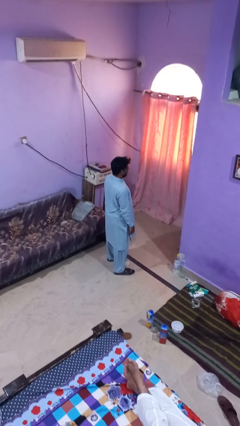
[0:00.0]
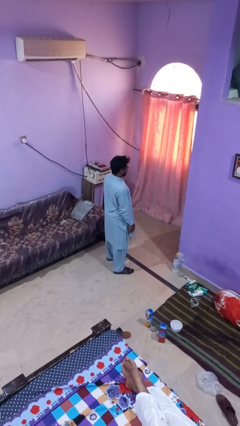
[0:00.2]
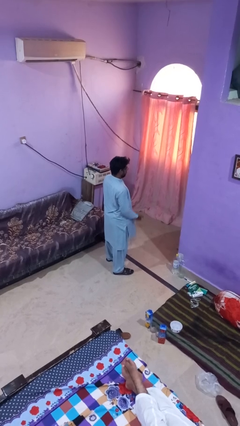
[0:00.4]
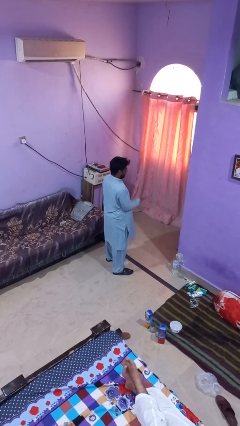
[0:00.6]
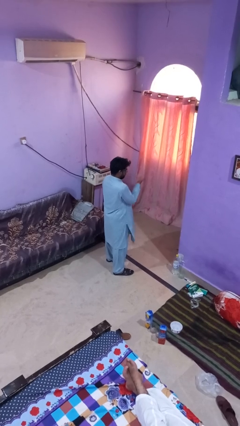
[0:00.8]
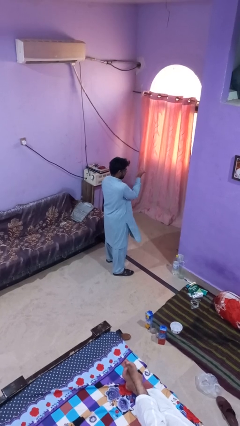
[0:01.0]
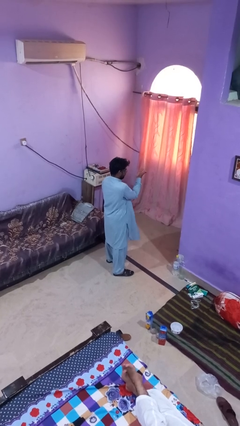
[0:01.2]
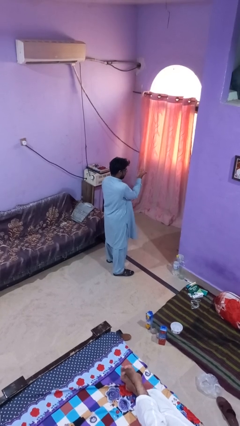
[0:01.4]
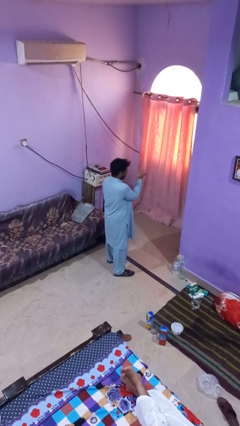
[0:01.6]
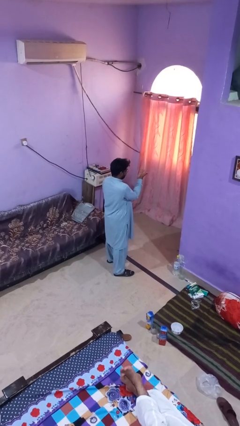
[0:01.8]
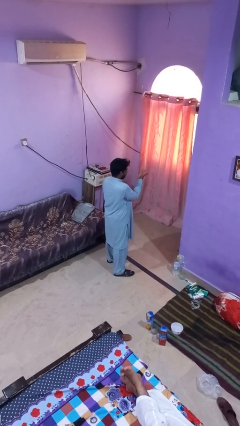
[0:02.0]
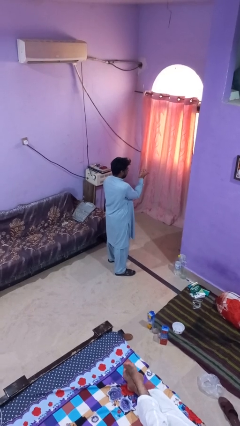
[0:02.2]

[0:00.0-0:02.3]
person gestures swipe up

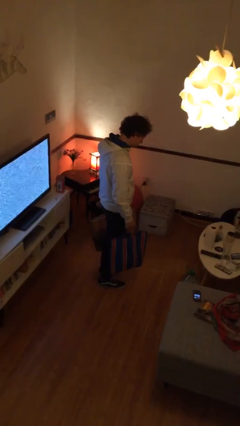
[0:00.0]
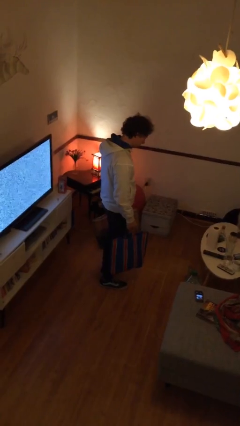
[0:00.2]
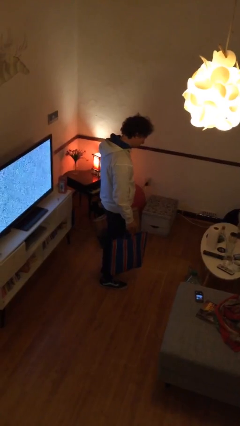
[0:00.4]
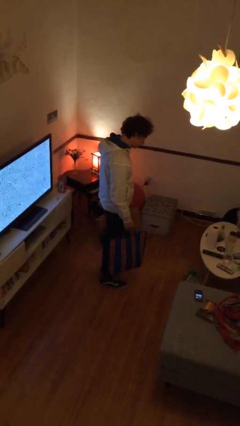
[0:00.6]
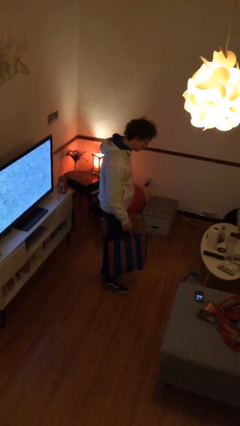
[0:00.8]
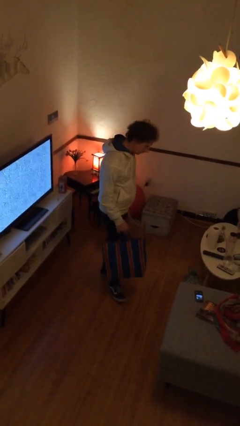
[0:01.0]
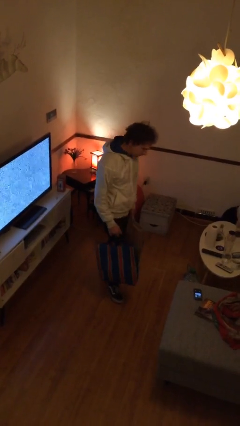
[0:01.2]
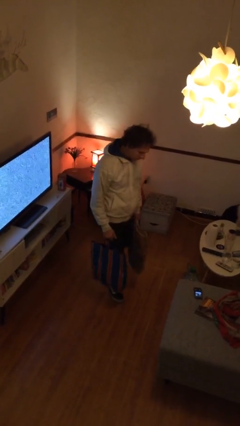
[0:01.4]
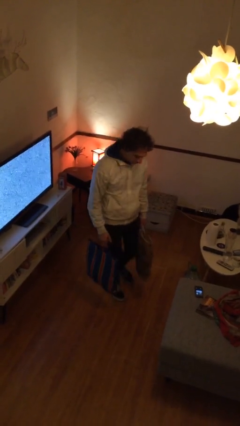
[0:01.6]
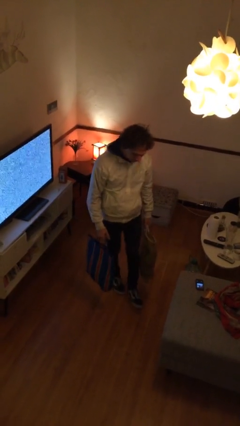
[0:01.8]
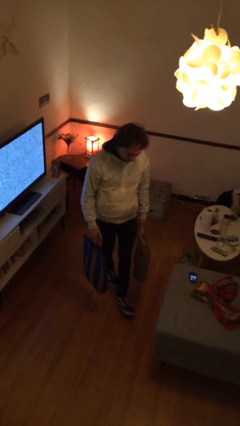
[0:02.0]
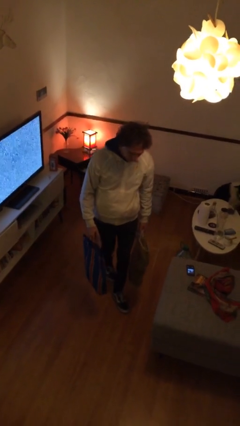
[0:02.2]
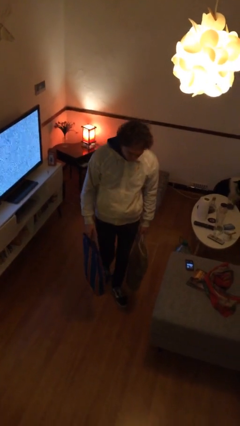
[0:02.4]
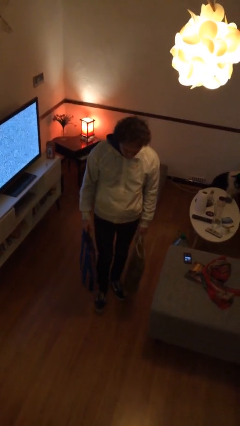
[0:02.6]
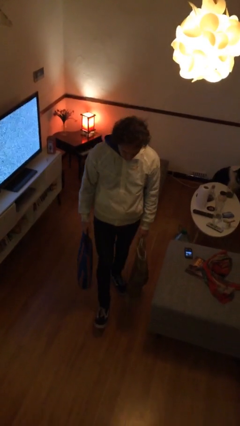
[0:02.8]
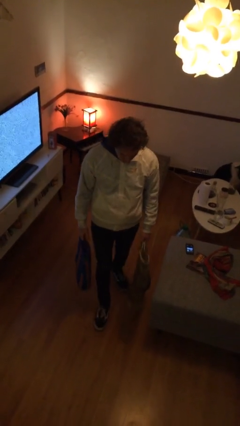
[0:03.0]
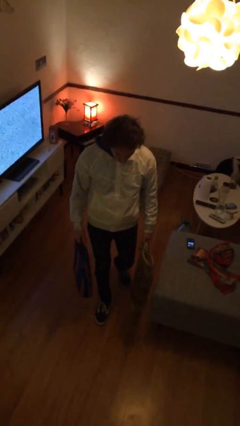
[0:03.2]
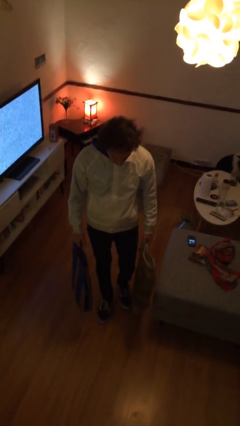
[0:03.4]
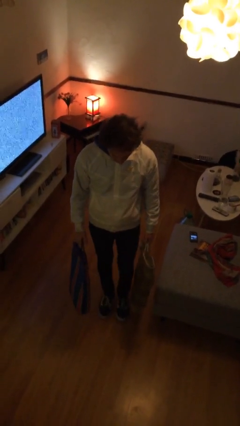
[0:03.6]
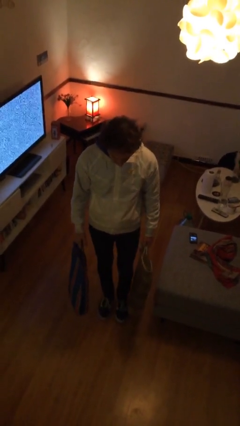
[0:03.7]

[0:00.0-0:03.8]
person carries groceries

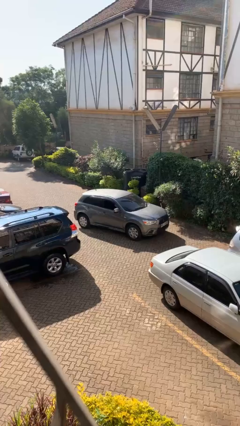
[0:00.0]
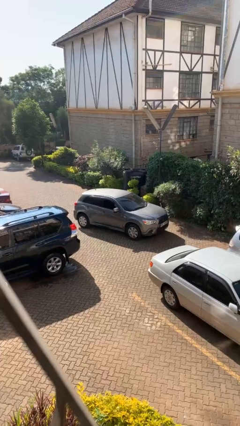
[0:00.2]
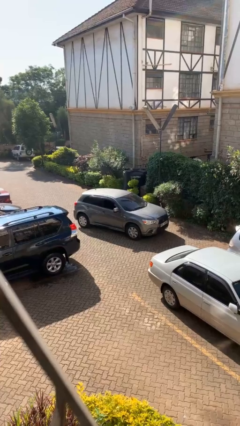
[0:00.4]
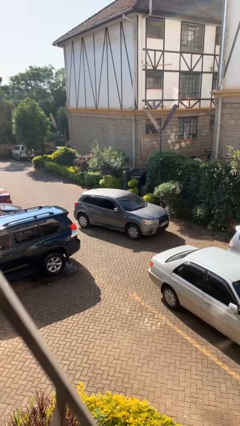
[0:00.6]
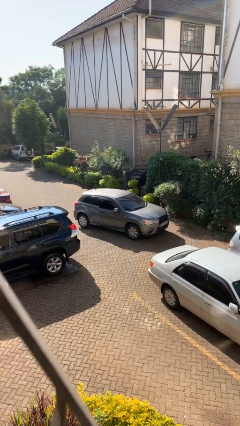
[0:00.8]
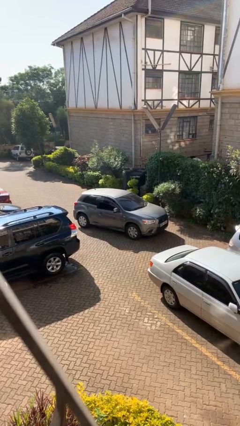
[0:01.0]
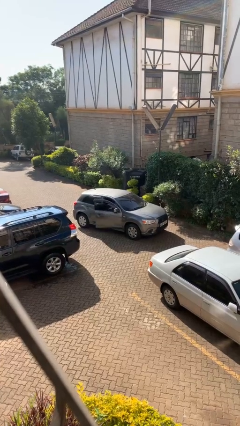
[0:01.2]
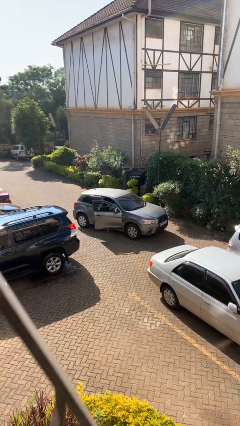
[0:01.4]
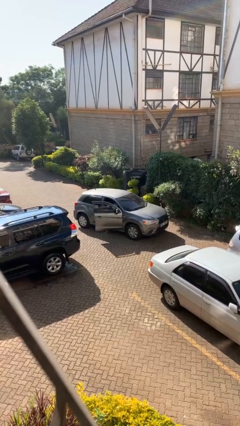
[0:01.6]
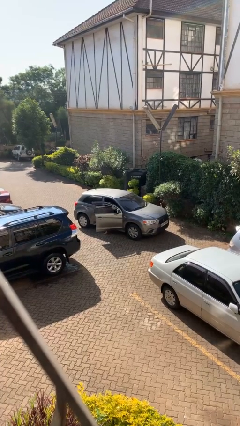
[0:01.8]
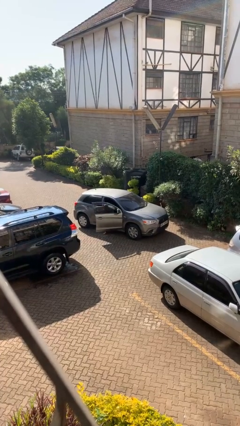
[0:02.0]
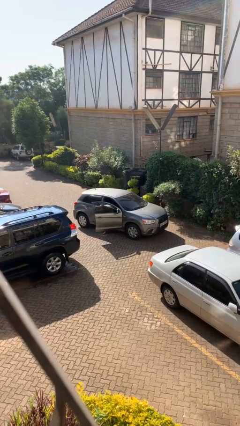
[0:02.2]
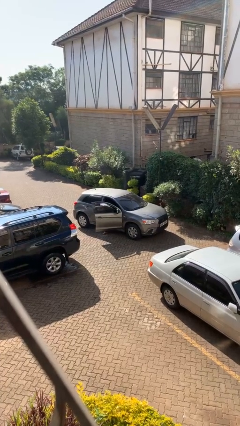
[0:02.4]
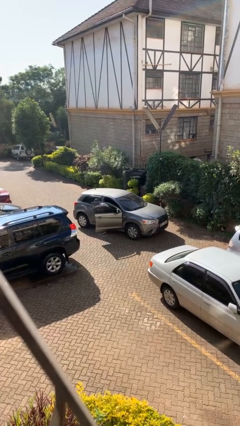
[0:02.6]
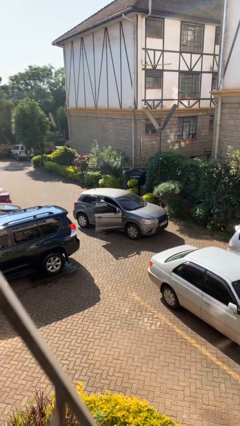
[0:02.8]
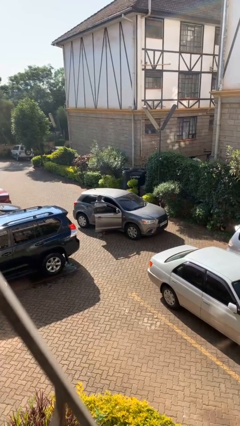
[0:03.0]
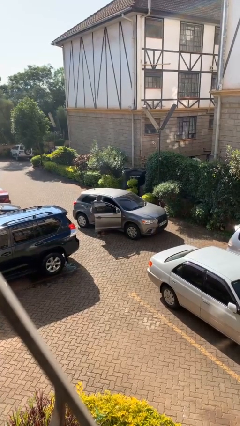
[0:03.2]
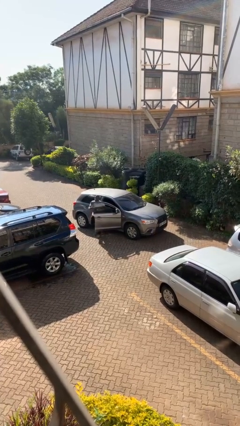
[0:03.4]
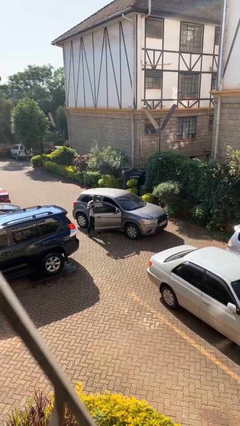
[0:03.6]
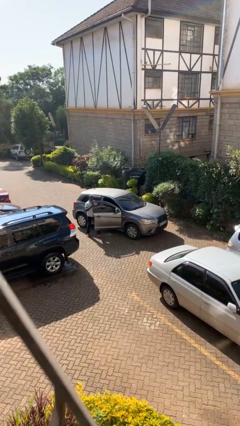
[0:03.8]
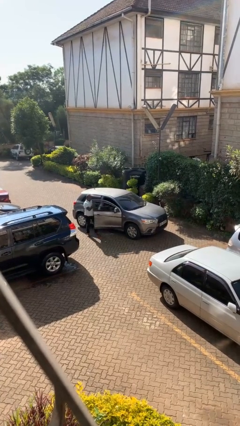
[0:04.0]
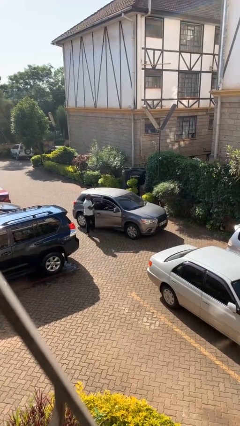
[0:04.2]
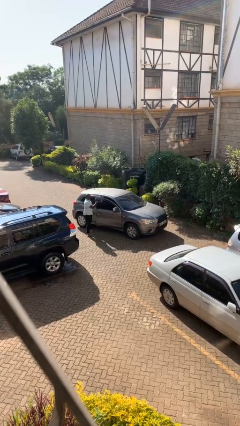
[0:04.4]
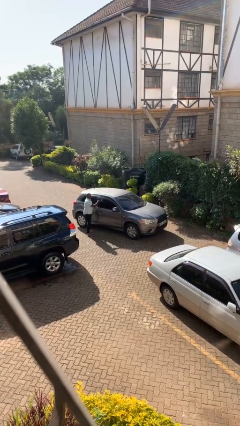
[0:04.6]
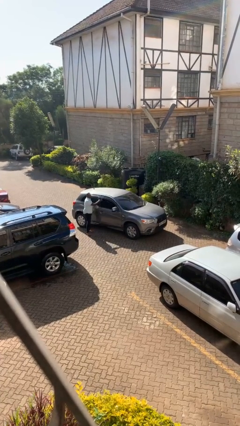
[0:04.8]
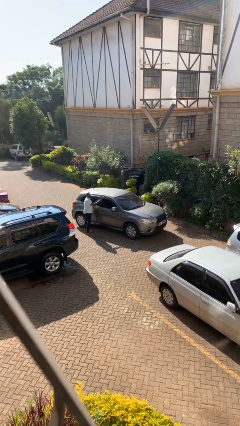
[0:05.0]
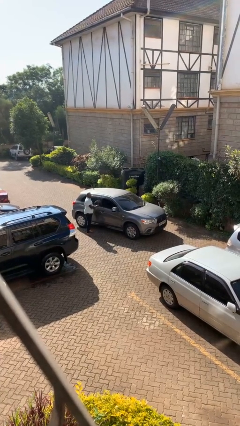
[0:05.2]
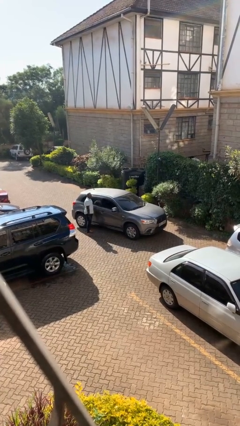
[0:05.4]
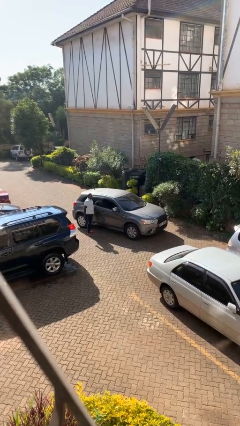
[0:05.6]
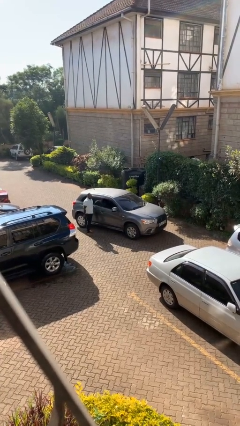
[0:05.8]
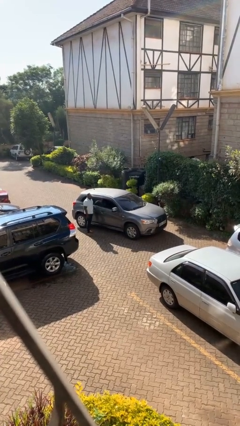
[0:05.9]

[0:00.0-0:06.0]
car drops off person

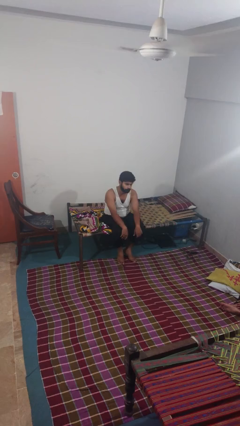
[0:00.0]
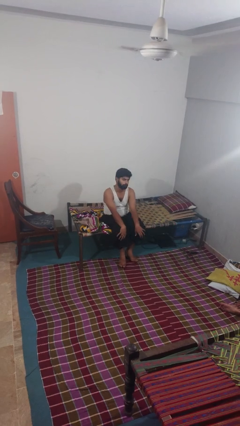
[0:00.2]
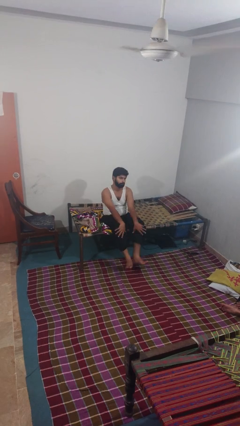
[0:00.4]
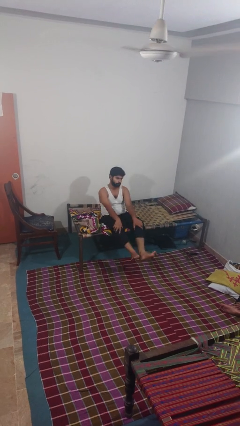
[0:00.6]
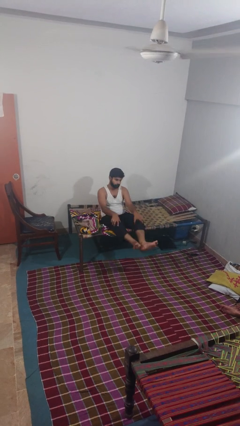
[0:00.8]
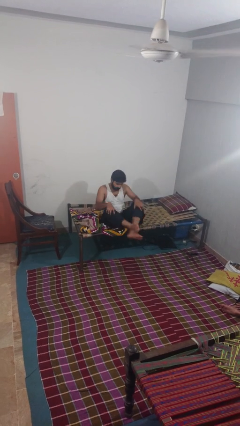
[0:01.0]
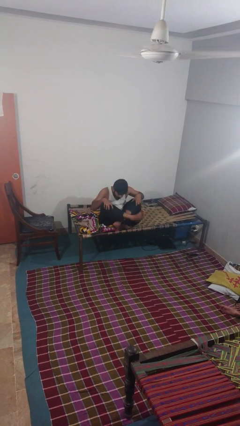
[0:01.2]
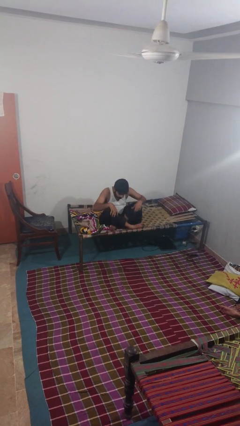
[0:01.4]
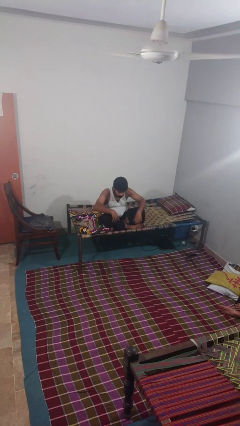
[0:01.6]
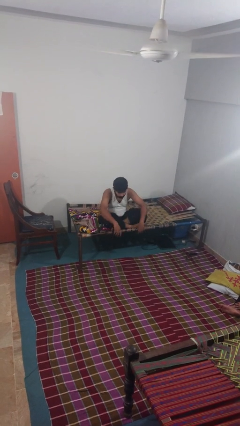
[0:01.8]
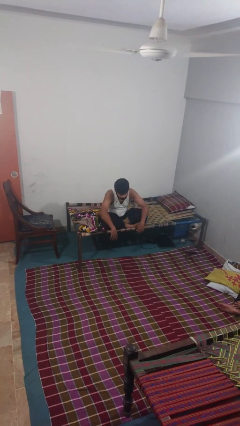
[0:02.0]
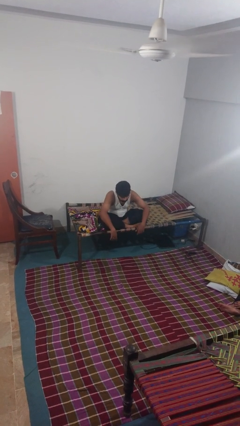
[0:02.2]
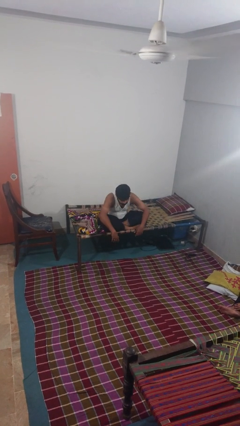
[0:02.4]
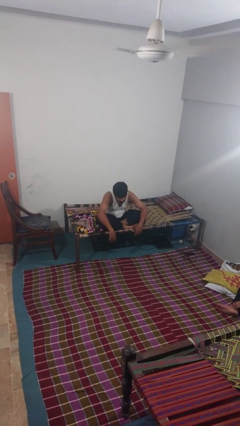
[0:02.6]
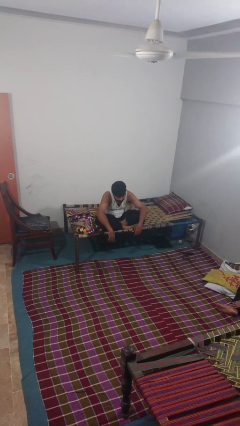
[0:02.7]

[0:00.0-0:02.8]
person crosses legs

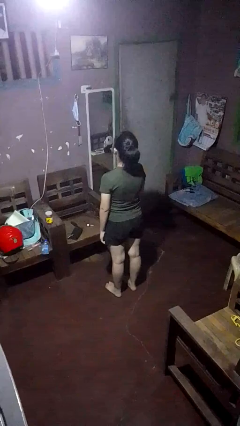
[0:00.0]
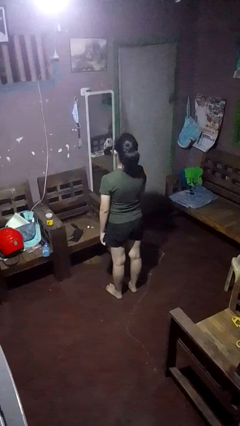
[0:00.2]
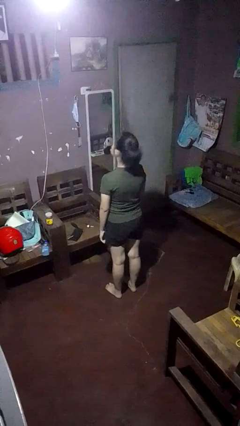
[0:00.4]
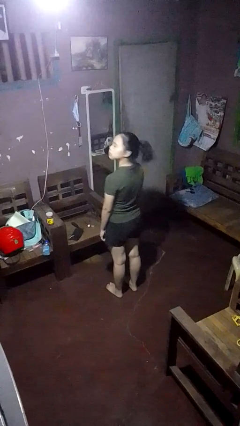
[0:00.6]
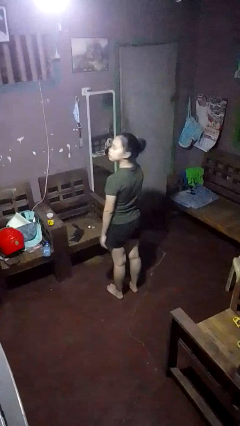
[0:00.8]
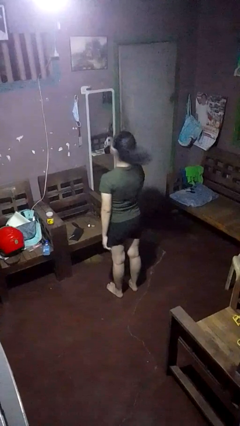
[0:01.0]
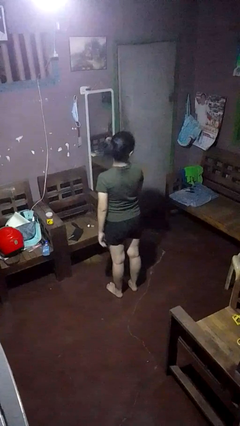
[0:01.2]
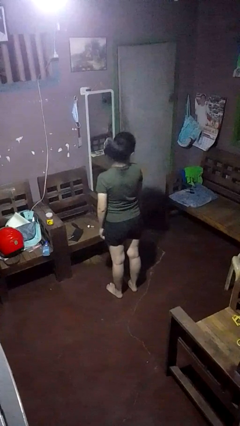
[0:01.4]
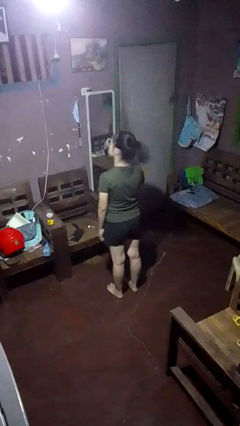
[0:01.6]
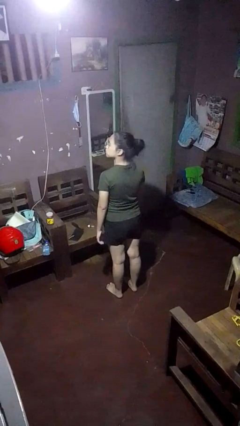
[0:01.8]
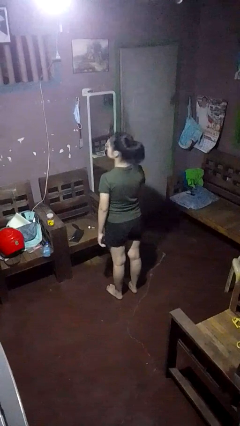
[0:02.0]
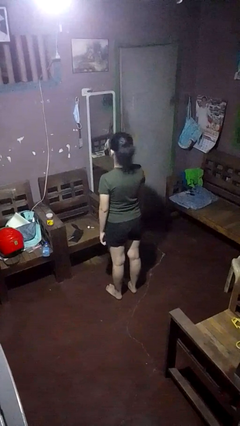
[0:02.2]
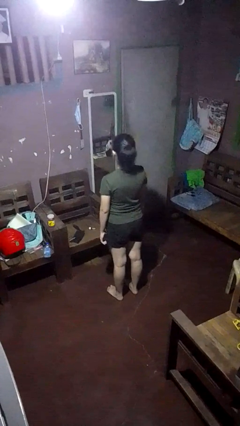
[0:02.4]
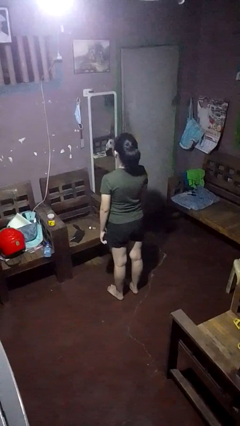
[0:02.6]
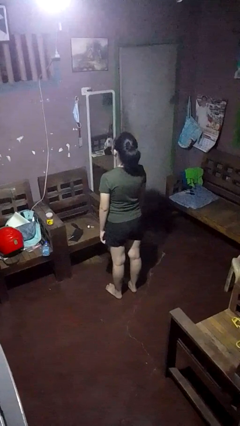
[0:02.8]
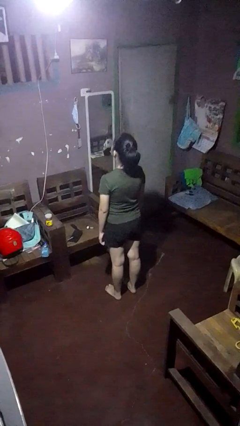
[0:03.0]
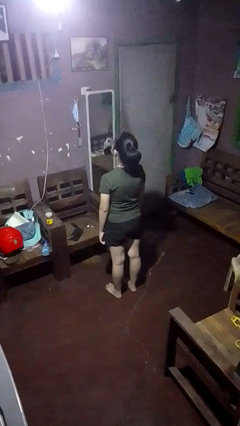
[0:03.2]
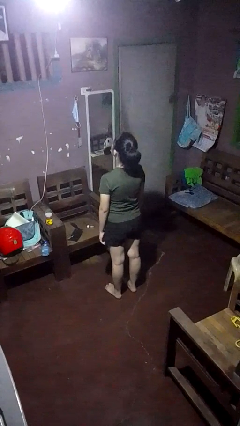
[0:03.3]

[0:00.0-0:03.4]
person shakes head
